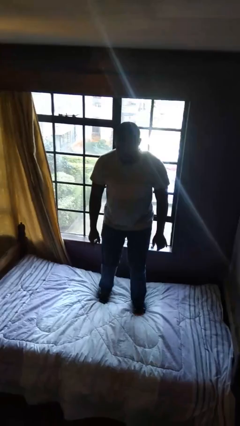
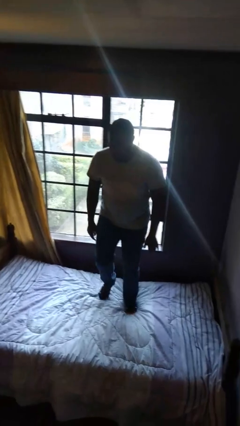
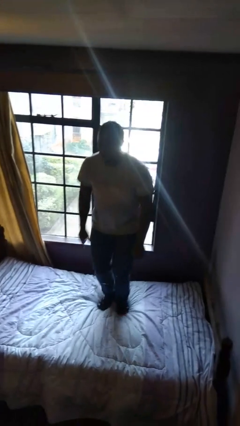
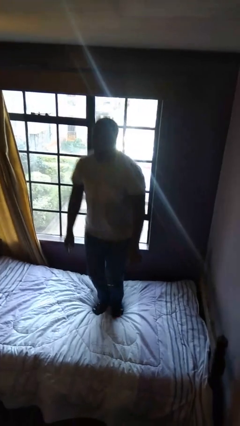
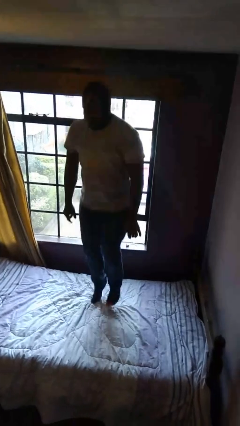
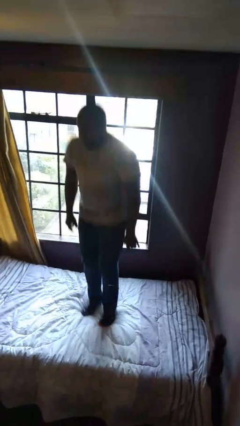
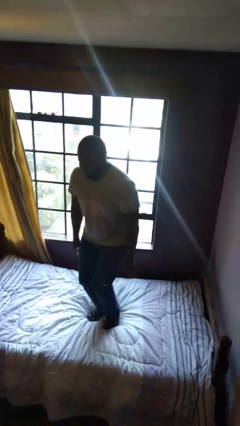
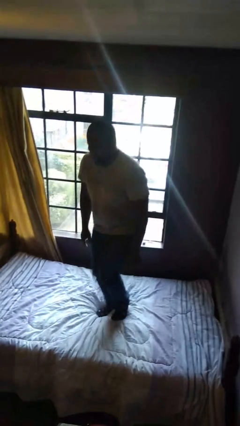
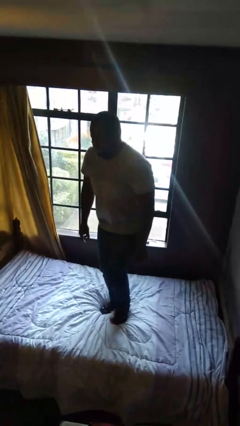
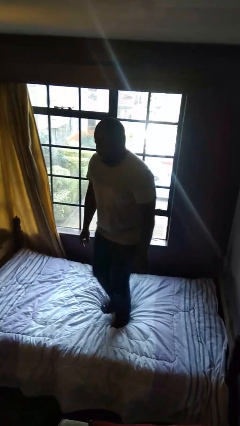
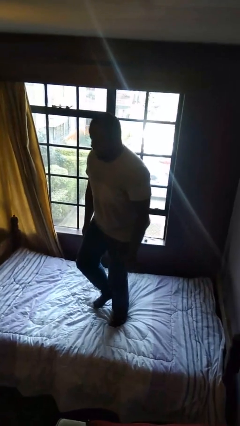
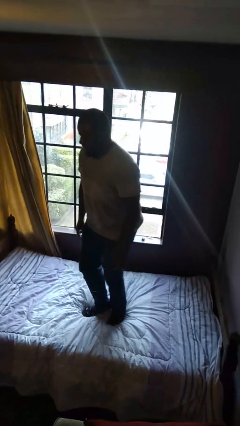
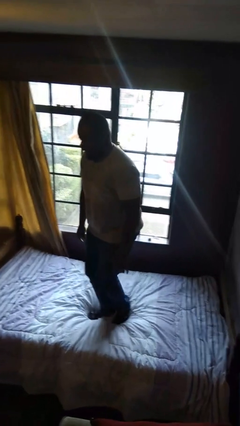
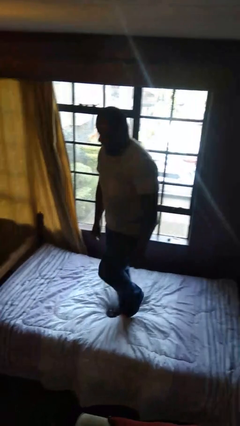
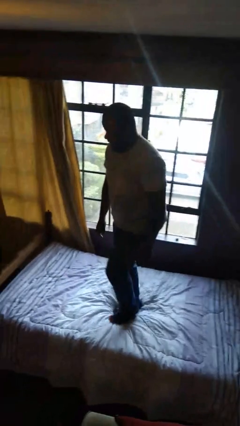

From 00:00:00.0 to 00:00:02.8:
person jumps on bed

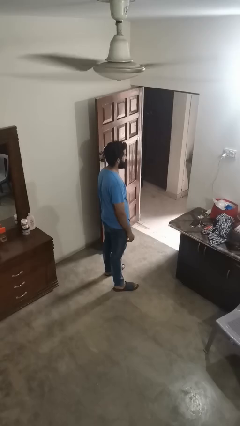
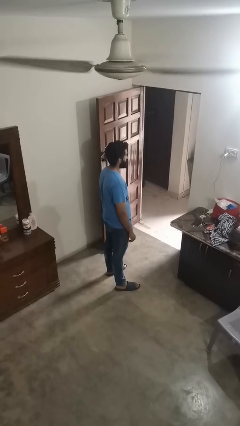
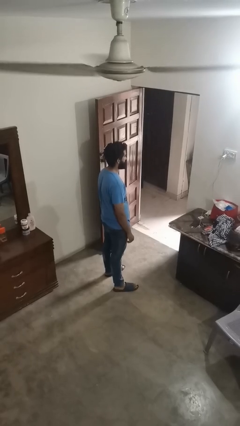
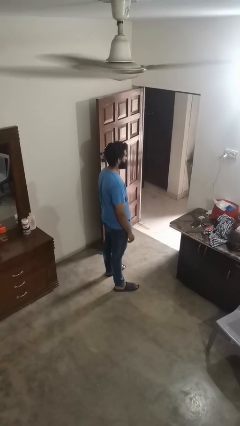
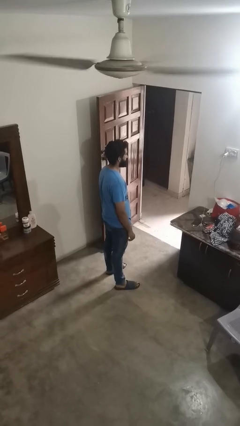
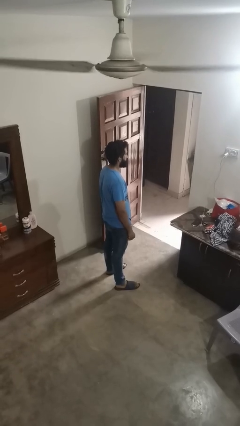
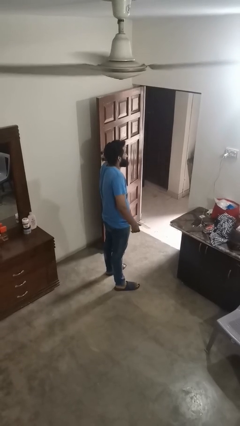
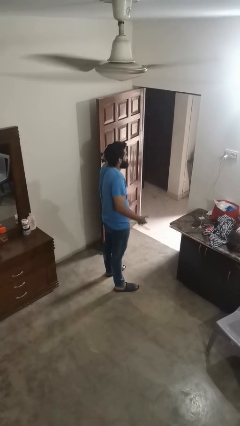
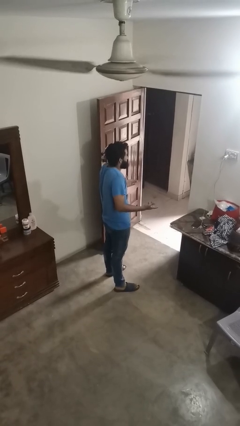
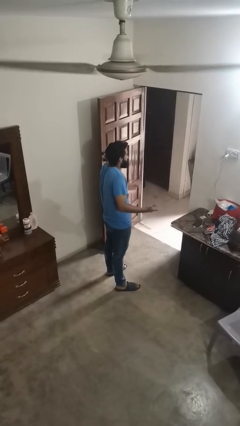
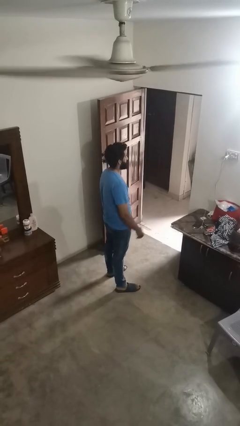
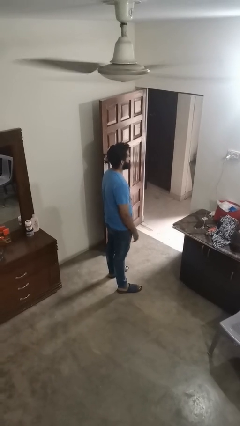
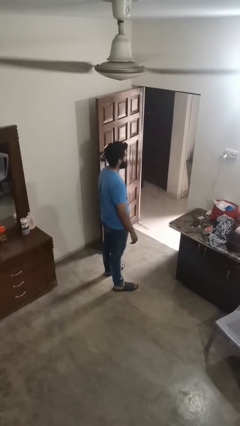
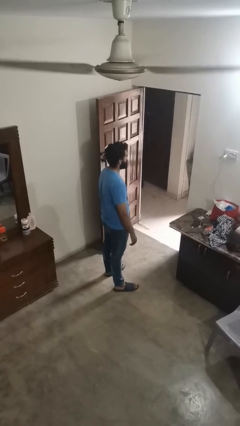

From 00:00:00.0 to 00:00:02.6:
person shrugs

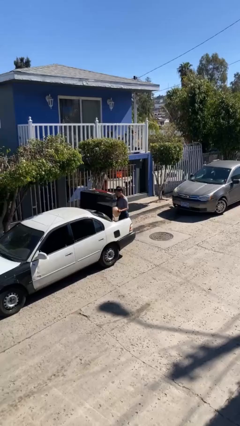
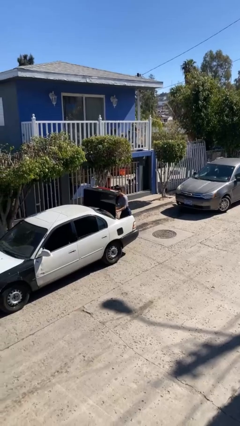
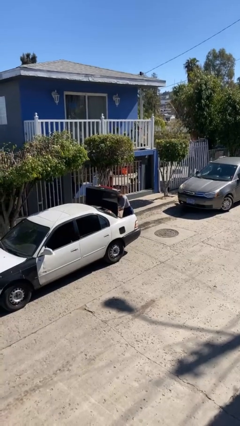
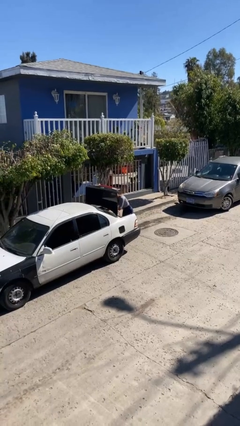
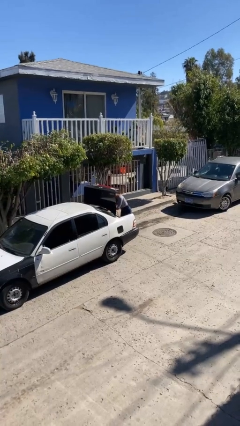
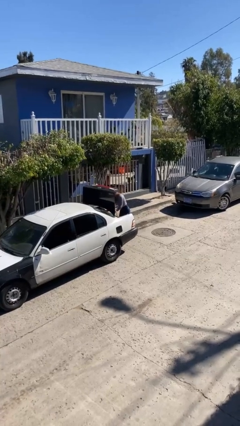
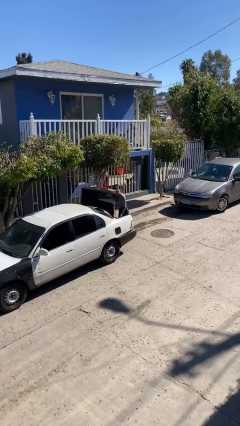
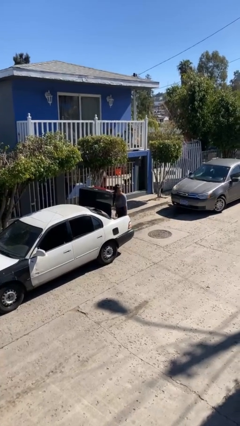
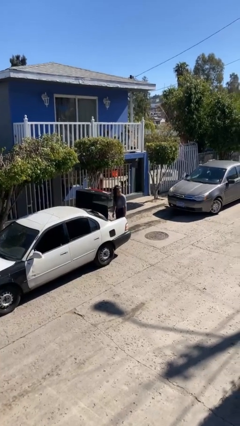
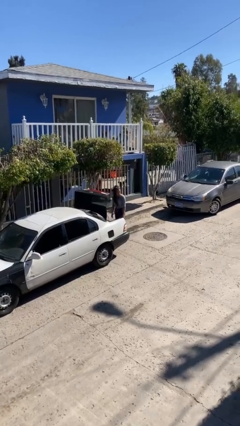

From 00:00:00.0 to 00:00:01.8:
person loads car

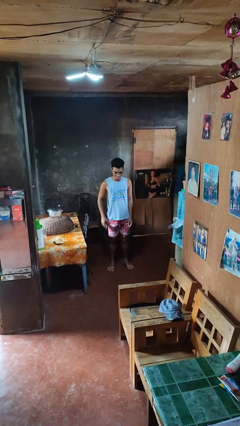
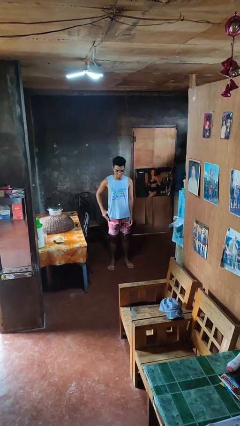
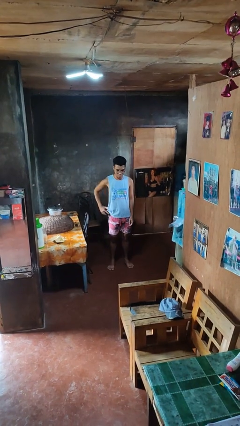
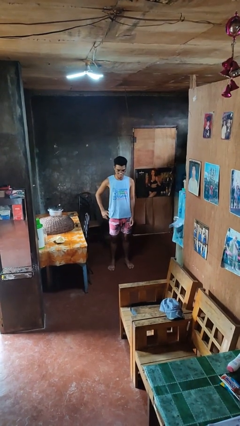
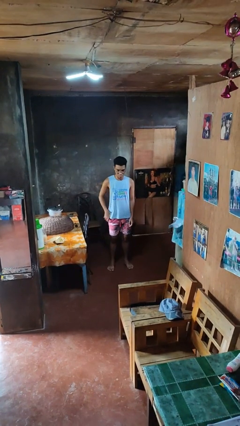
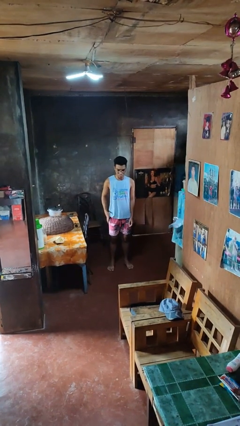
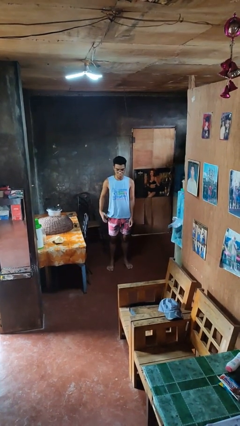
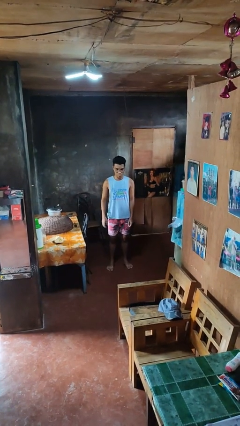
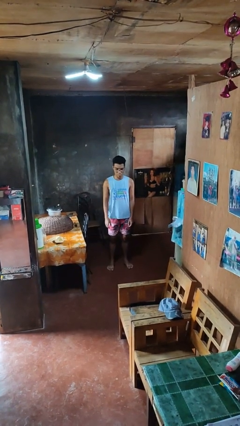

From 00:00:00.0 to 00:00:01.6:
person puts phone into pocket

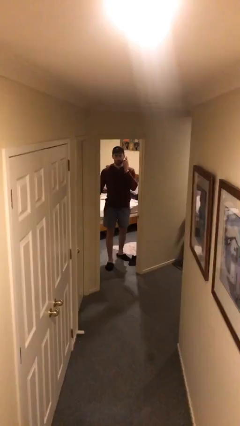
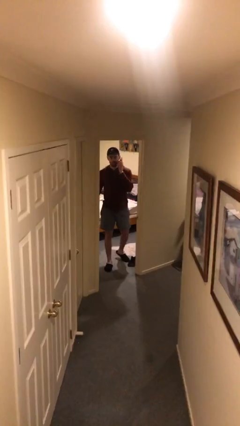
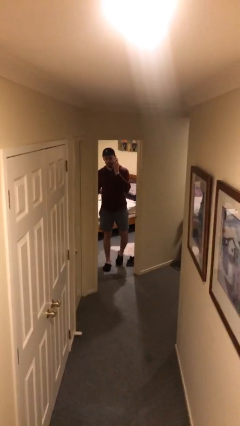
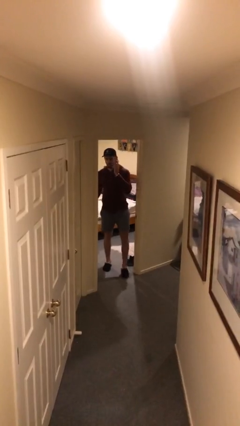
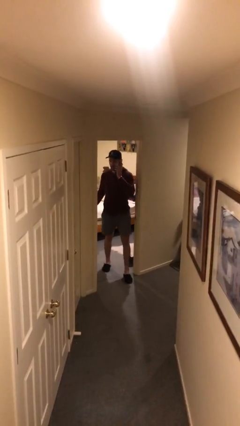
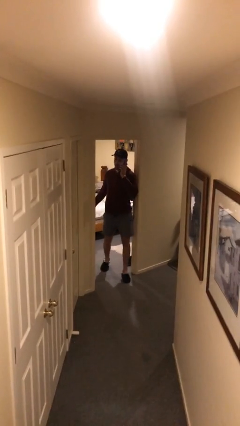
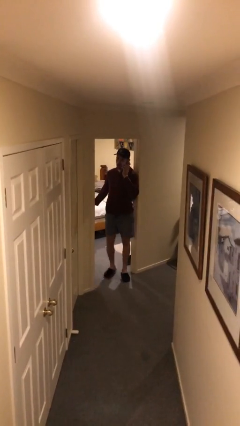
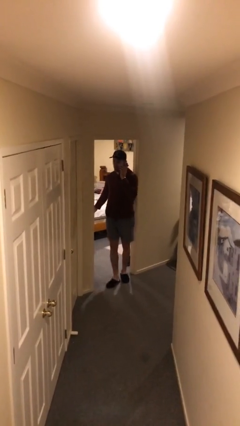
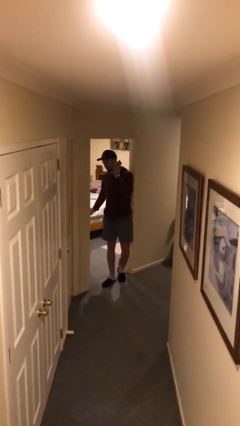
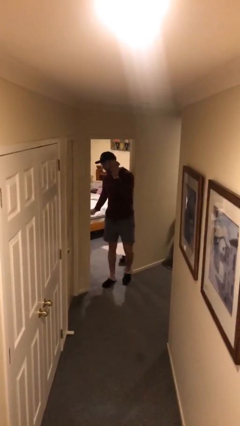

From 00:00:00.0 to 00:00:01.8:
person enters scene through structure

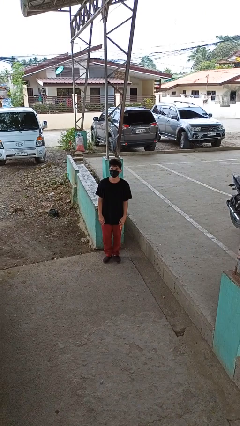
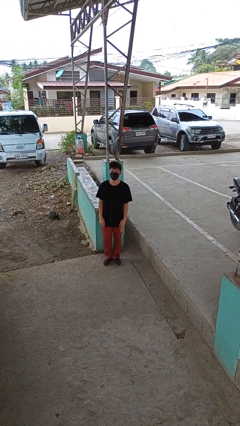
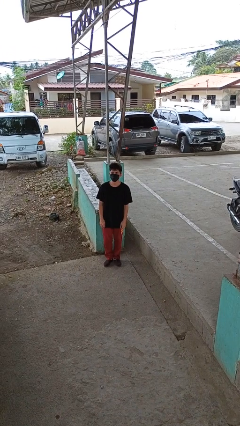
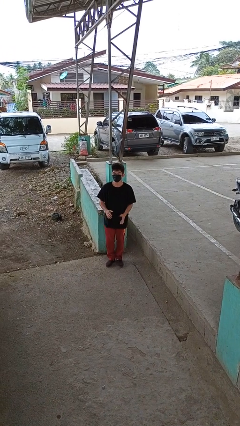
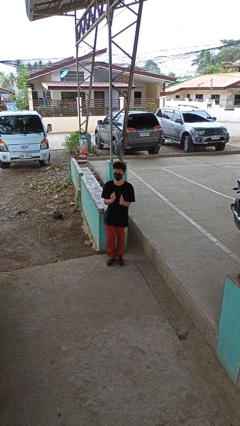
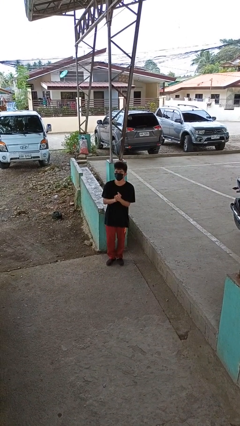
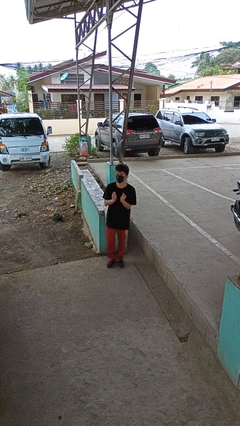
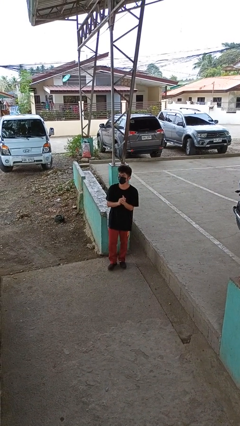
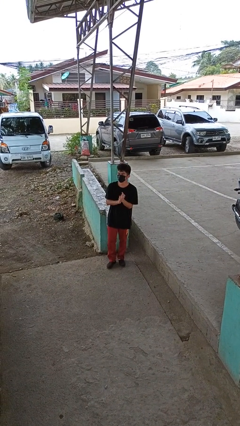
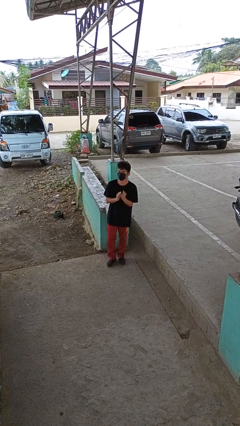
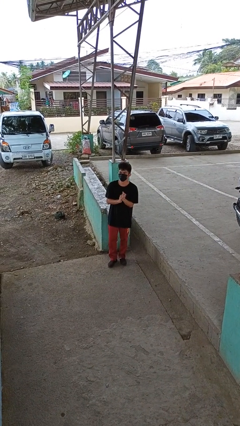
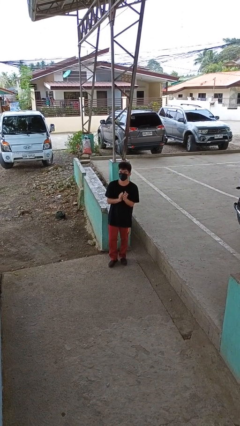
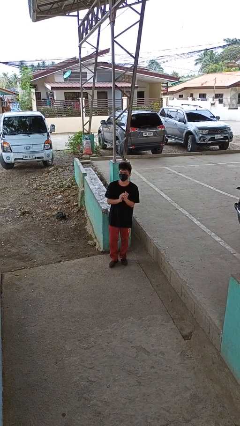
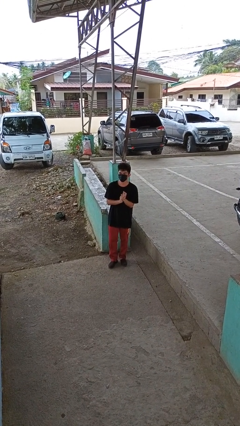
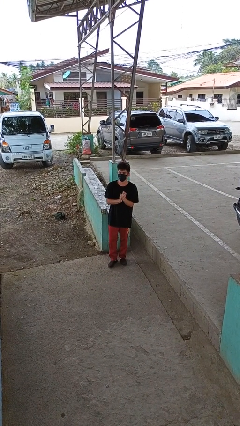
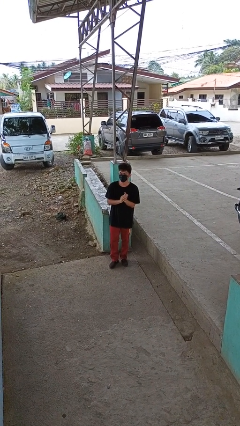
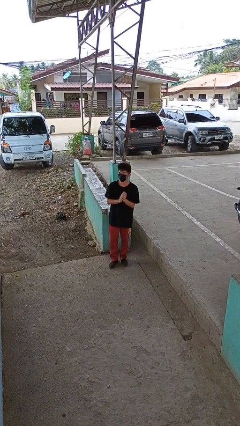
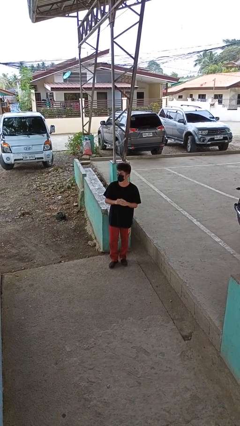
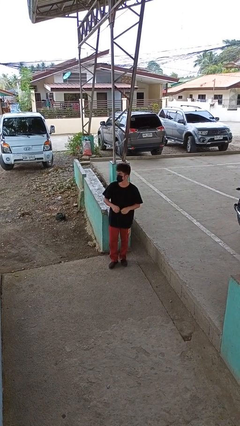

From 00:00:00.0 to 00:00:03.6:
person claps hands

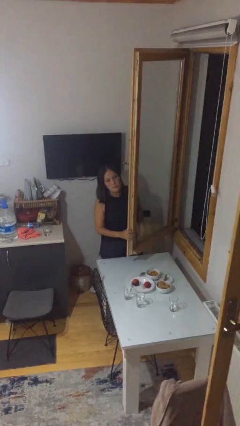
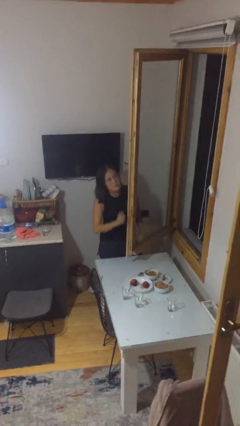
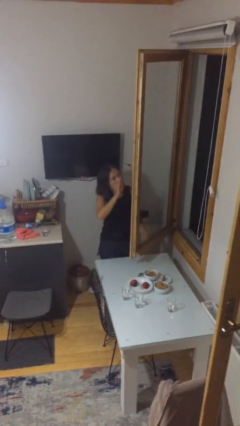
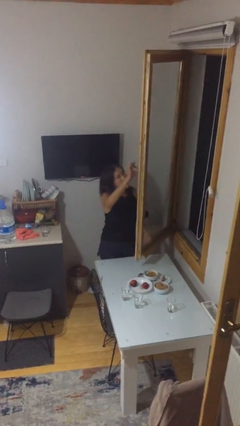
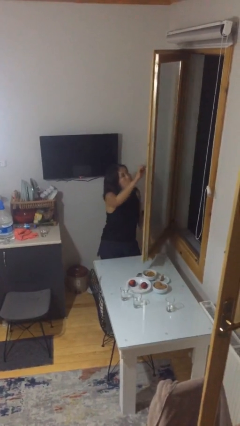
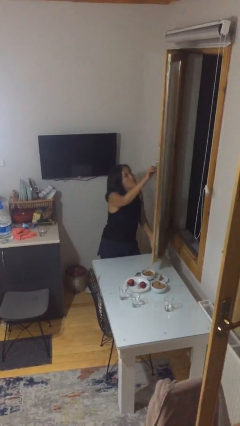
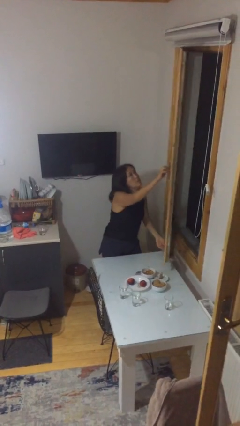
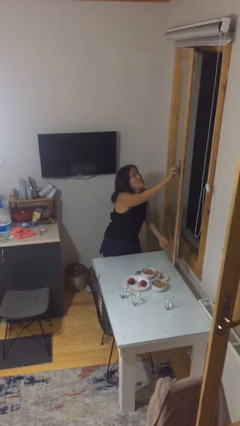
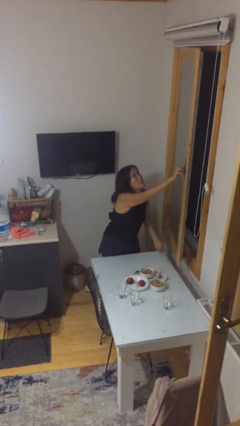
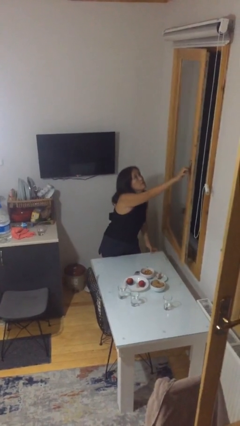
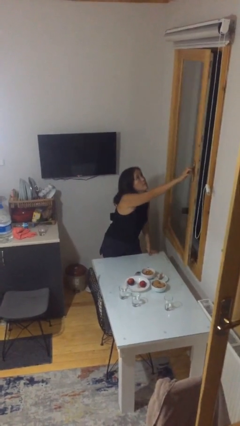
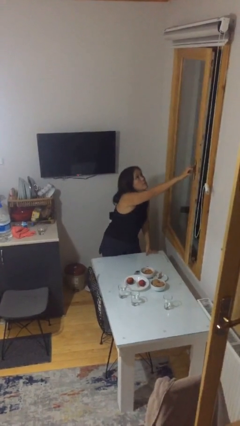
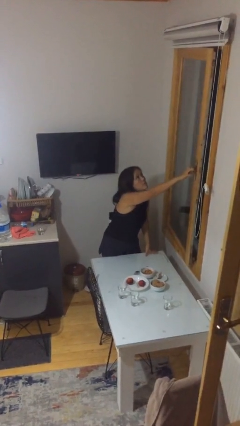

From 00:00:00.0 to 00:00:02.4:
person closes home window
